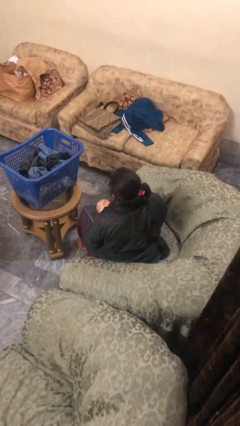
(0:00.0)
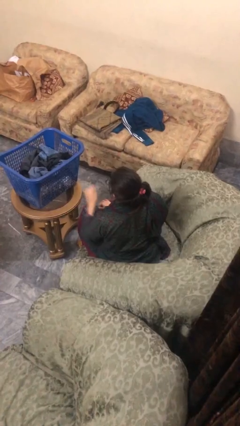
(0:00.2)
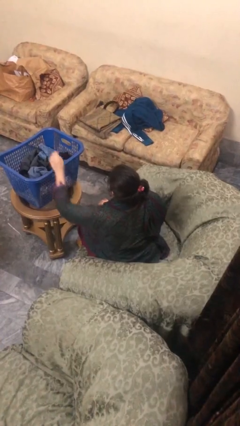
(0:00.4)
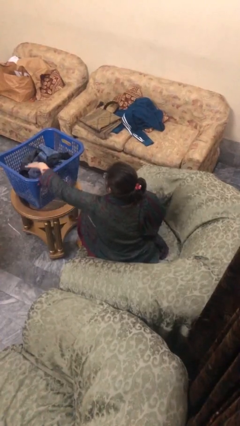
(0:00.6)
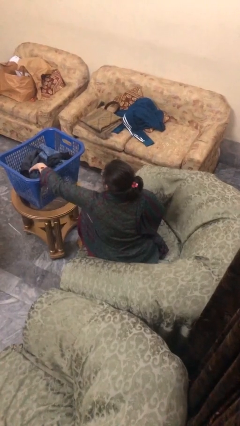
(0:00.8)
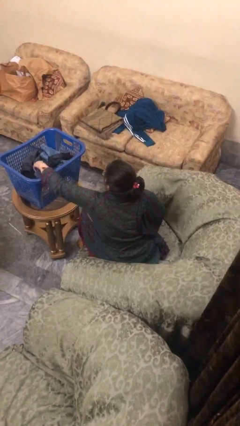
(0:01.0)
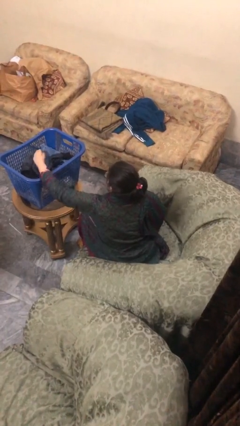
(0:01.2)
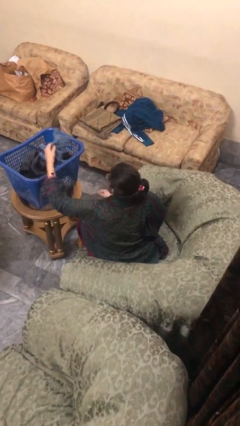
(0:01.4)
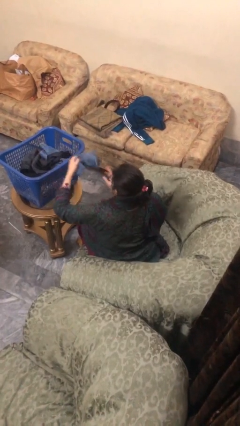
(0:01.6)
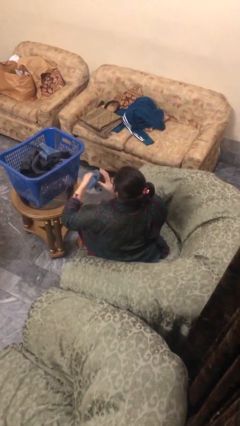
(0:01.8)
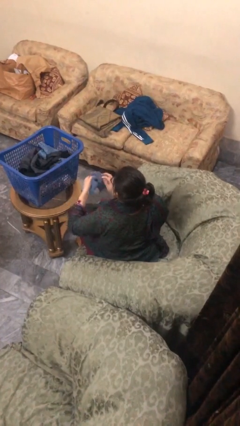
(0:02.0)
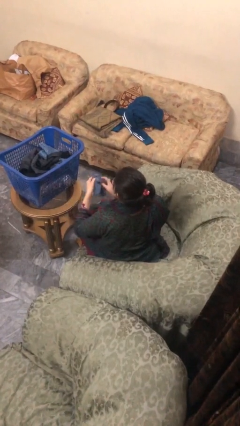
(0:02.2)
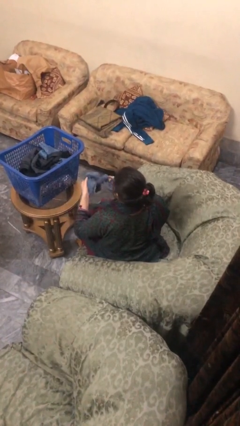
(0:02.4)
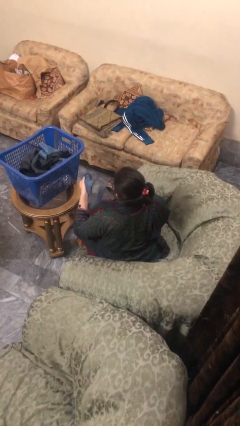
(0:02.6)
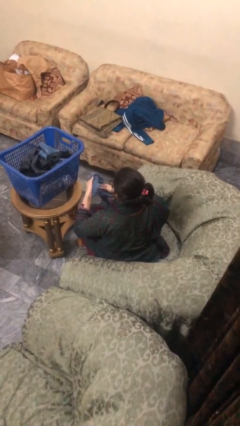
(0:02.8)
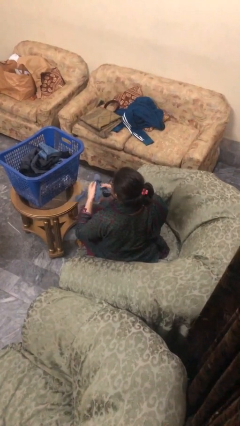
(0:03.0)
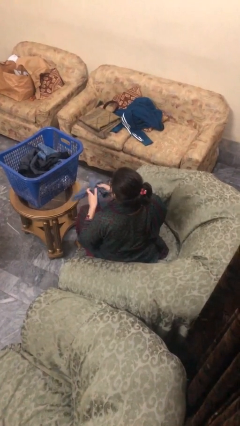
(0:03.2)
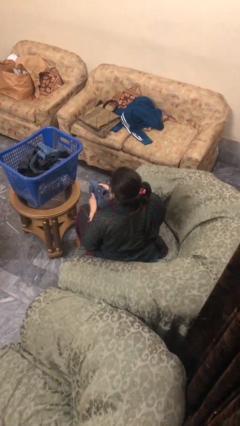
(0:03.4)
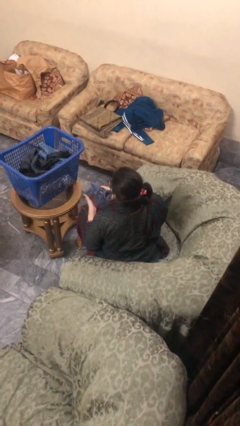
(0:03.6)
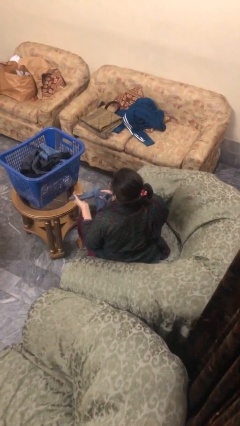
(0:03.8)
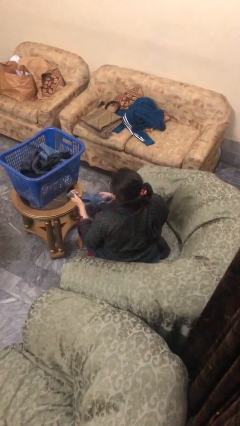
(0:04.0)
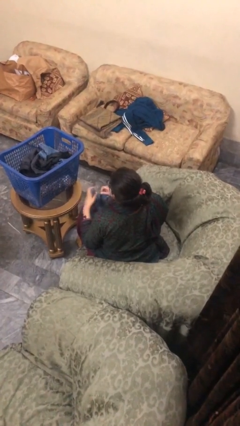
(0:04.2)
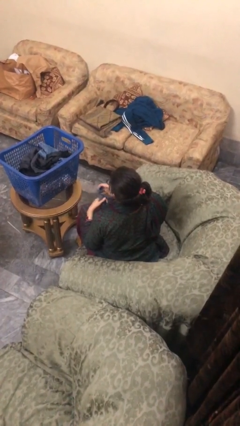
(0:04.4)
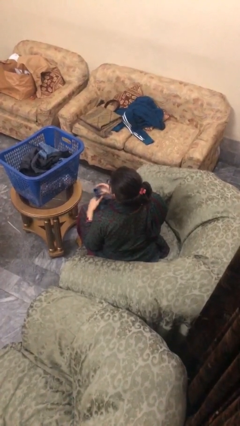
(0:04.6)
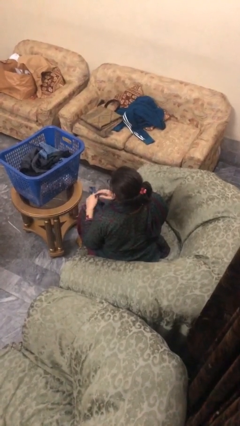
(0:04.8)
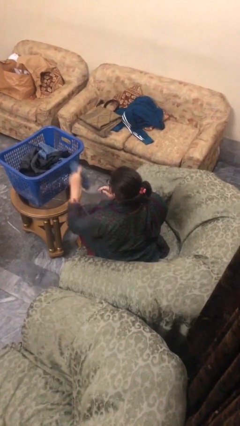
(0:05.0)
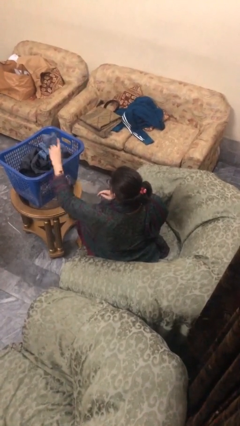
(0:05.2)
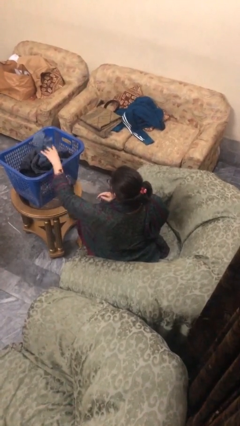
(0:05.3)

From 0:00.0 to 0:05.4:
person folds socks

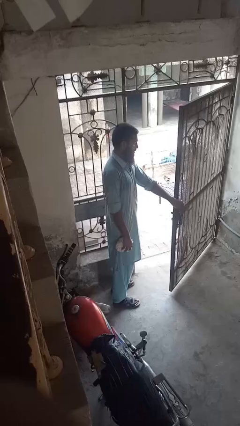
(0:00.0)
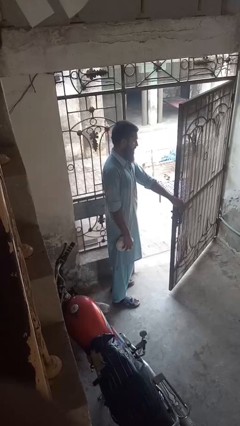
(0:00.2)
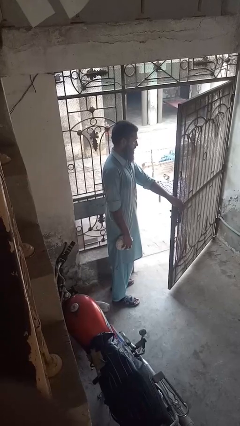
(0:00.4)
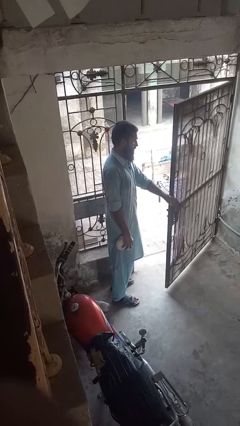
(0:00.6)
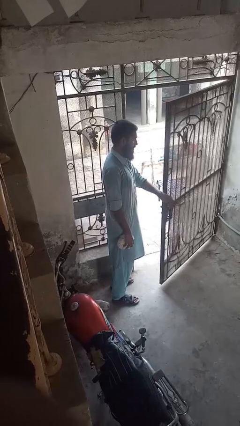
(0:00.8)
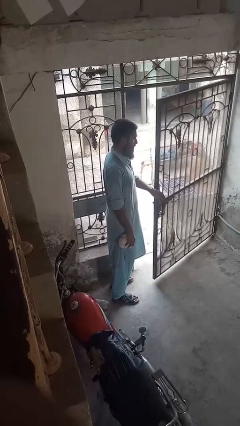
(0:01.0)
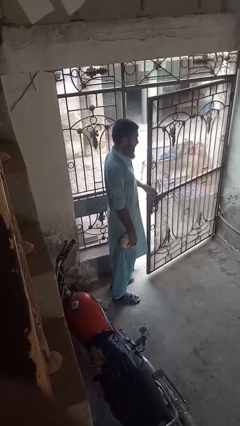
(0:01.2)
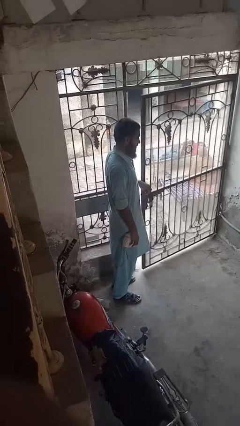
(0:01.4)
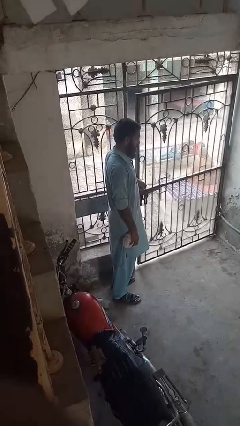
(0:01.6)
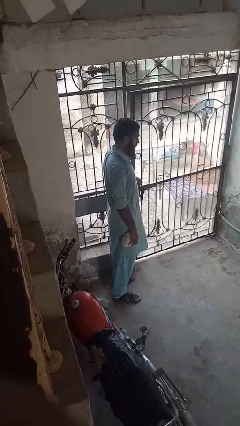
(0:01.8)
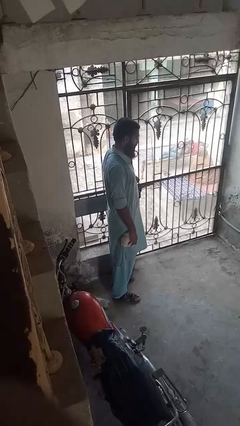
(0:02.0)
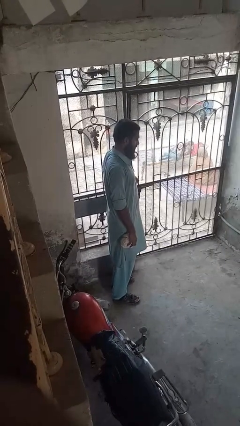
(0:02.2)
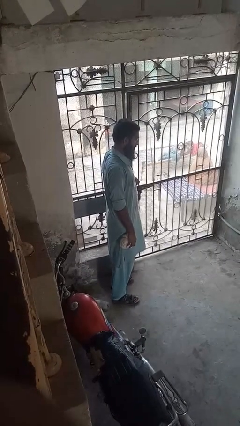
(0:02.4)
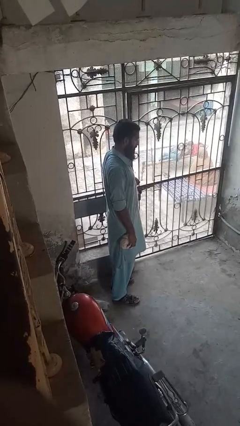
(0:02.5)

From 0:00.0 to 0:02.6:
person closes gate

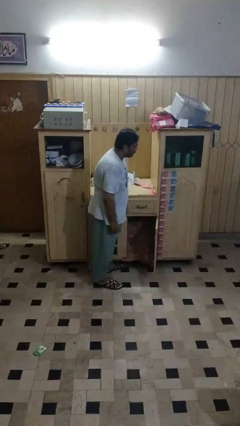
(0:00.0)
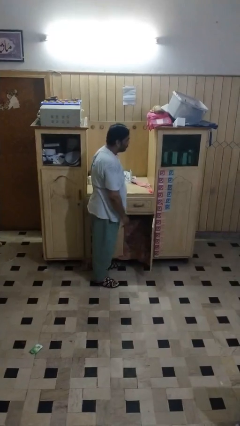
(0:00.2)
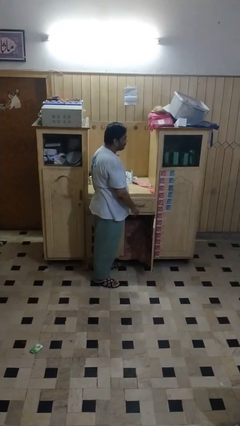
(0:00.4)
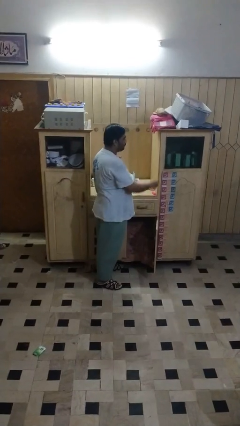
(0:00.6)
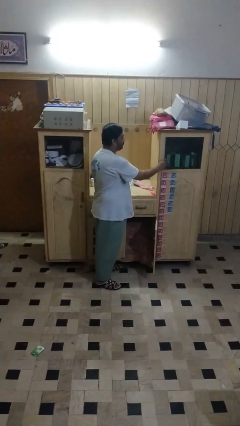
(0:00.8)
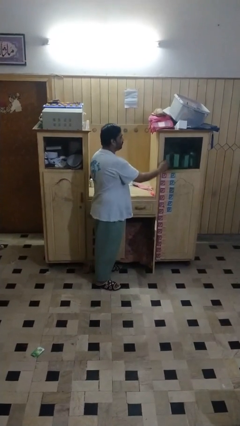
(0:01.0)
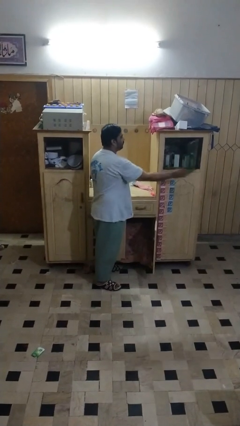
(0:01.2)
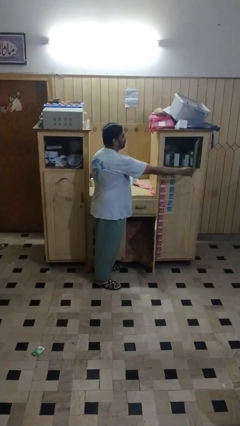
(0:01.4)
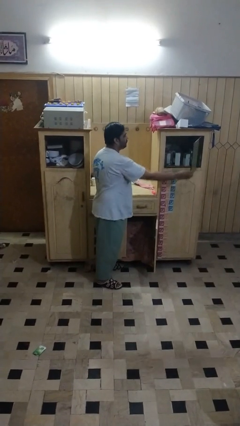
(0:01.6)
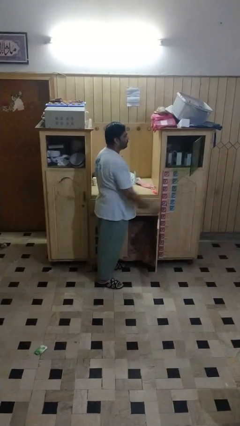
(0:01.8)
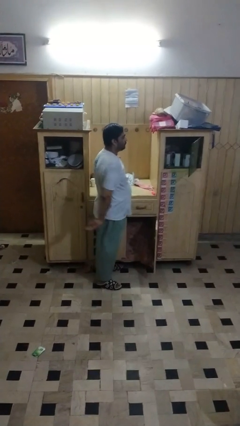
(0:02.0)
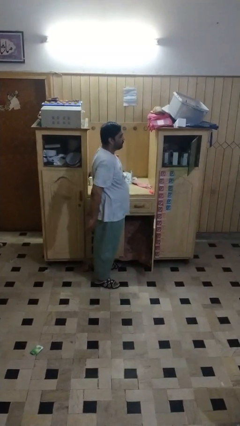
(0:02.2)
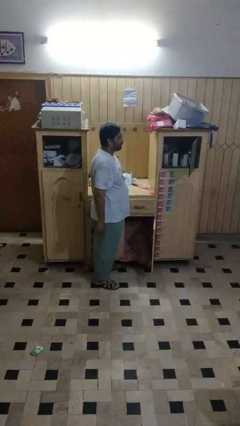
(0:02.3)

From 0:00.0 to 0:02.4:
person closes cabinet

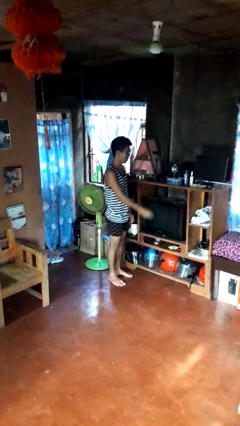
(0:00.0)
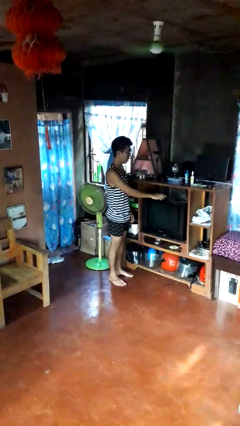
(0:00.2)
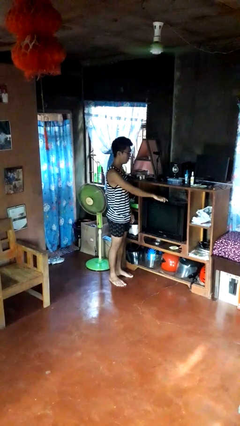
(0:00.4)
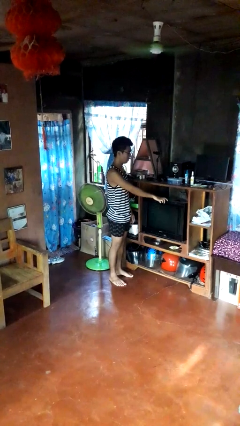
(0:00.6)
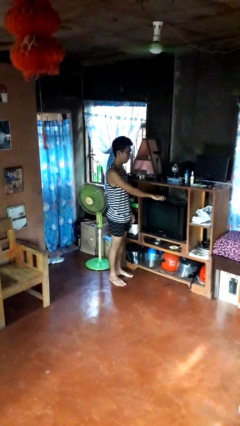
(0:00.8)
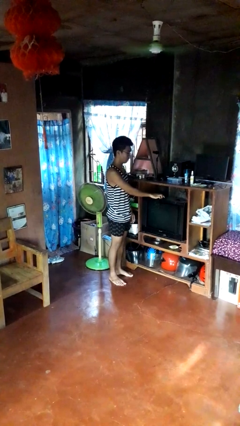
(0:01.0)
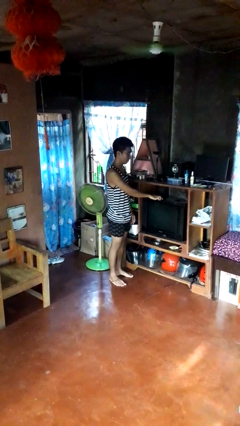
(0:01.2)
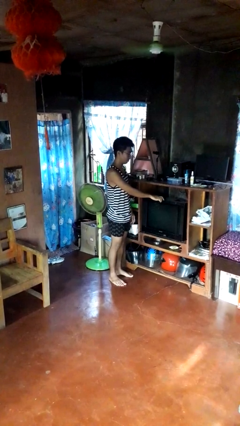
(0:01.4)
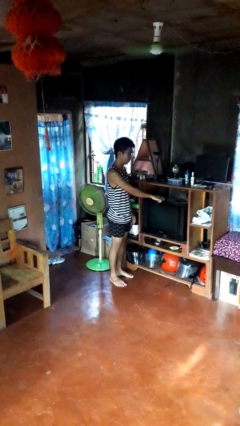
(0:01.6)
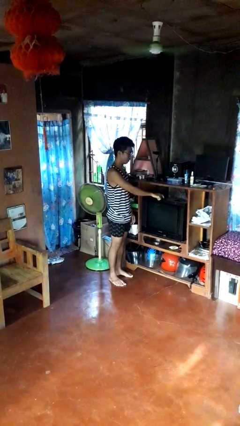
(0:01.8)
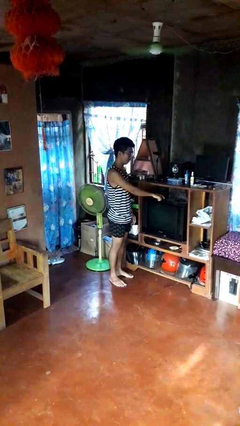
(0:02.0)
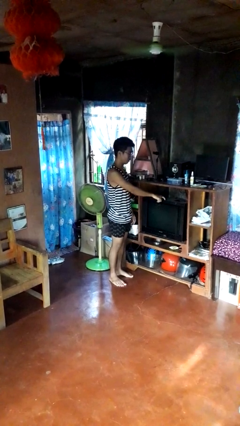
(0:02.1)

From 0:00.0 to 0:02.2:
person taps object with finger

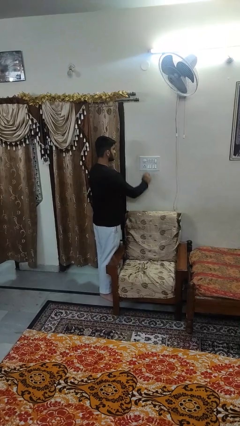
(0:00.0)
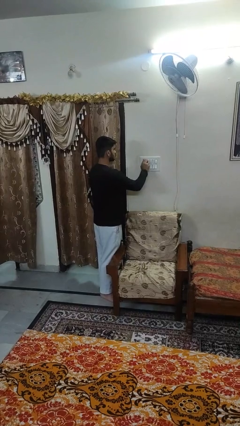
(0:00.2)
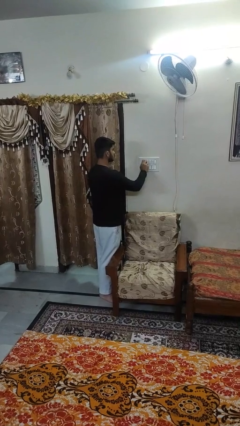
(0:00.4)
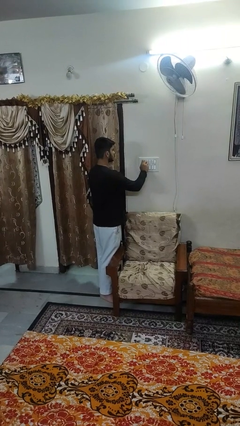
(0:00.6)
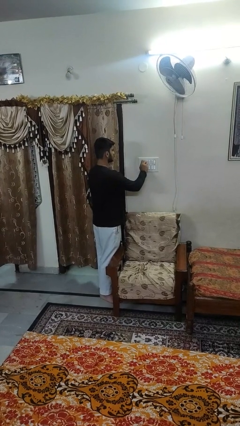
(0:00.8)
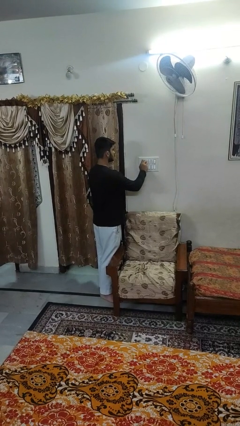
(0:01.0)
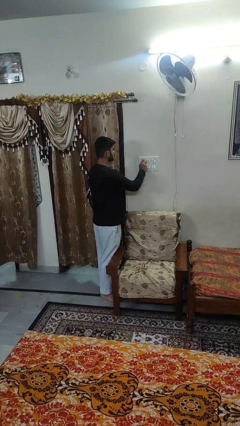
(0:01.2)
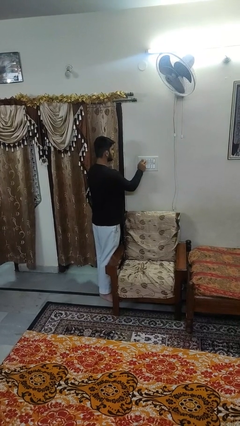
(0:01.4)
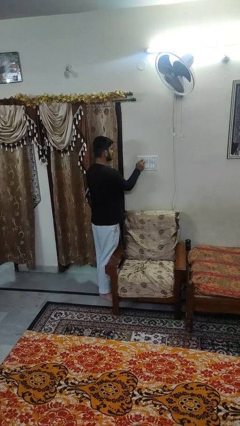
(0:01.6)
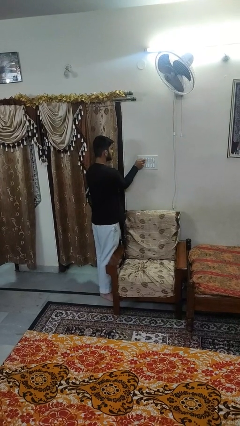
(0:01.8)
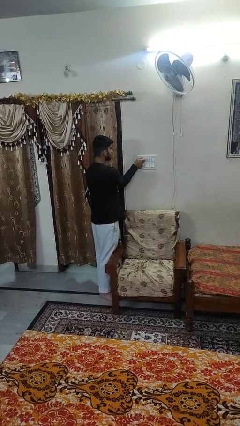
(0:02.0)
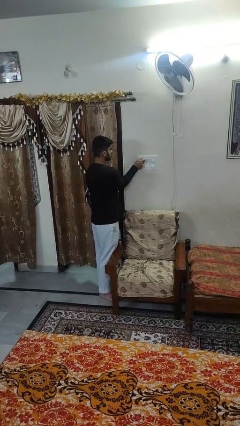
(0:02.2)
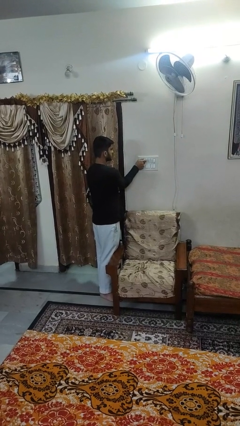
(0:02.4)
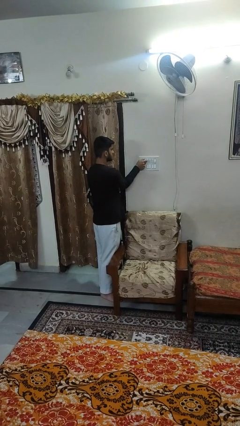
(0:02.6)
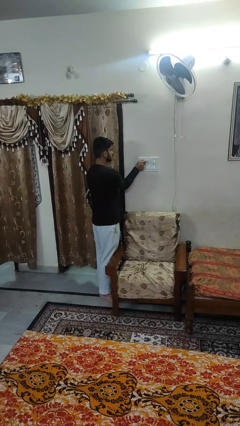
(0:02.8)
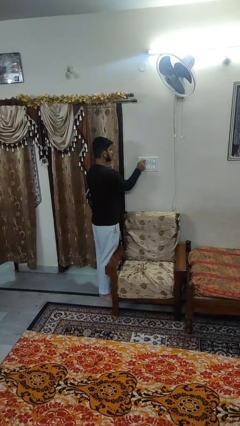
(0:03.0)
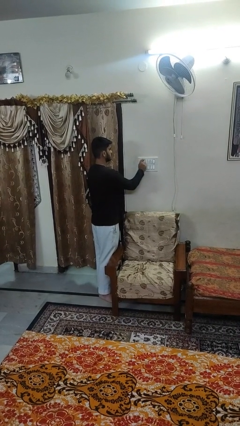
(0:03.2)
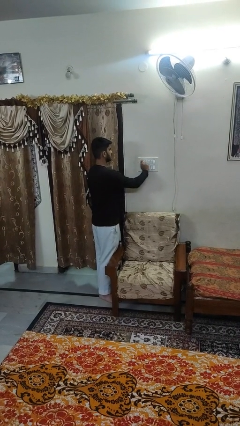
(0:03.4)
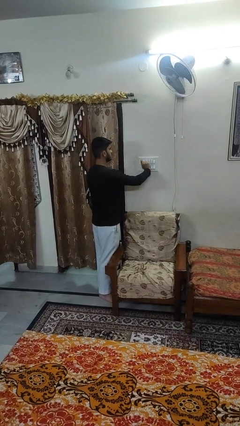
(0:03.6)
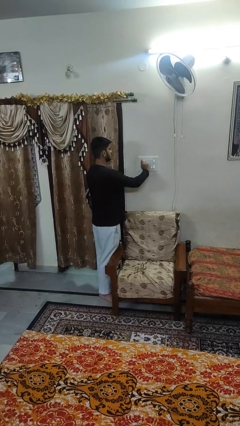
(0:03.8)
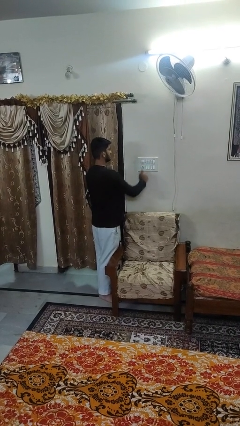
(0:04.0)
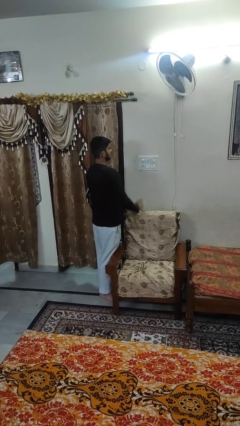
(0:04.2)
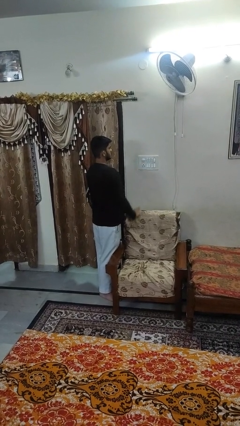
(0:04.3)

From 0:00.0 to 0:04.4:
person adjusts thermostat

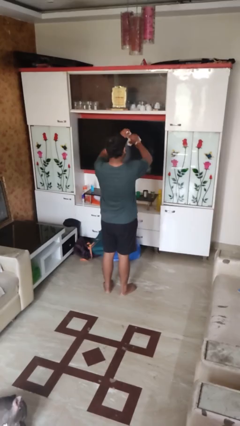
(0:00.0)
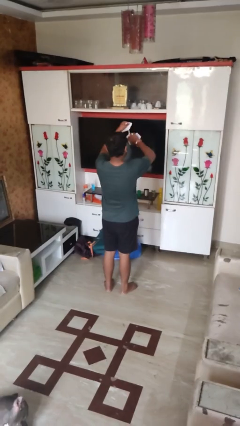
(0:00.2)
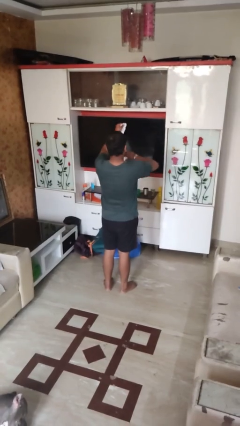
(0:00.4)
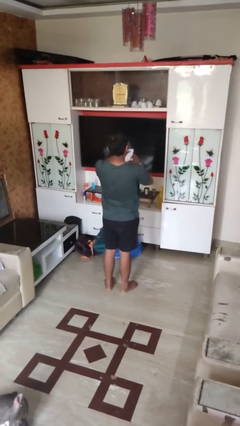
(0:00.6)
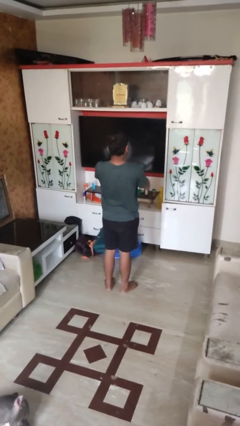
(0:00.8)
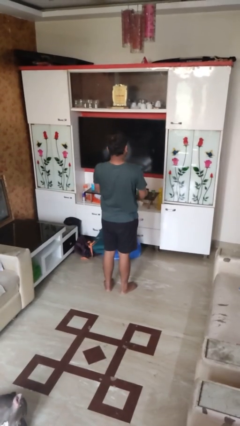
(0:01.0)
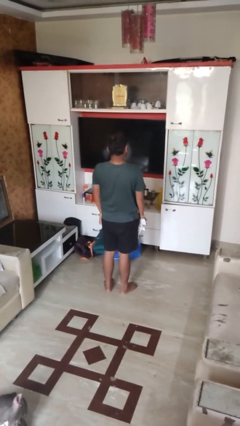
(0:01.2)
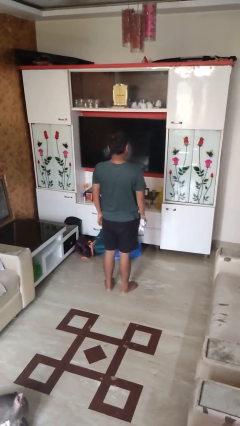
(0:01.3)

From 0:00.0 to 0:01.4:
person tears paper
